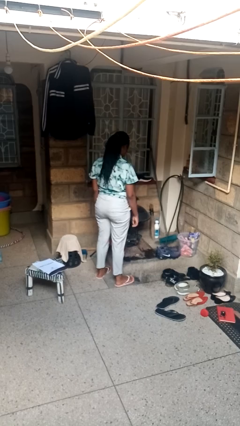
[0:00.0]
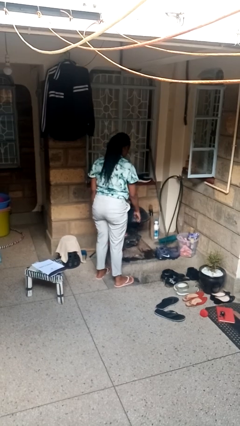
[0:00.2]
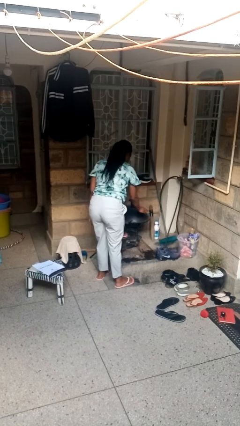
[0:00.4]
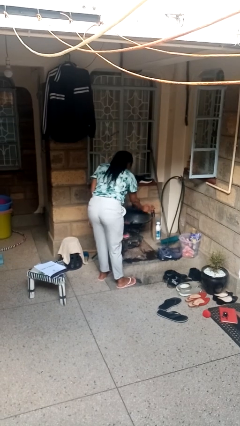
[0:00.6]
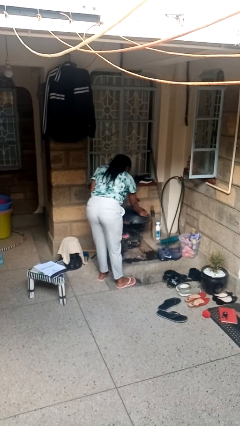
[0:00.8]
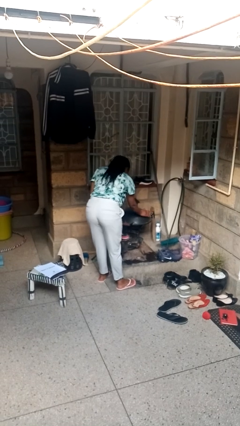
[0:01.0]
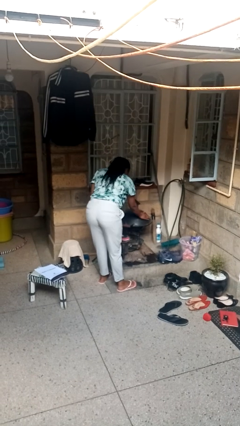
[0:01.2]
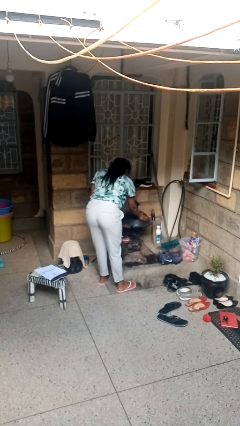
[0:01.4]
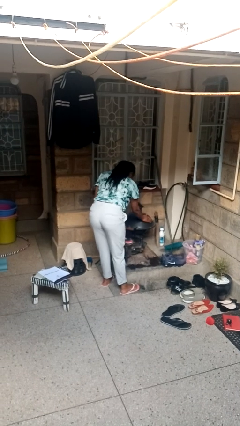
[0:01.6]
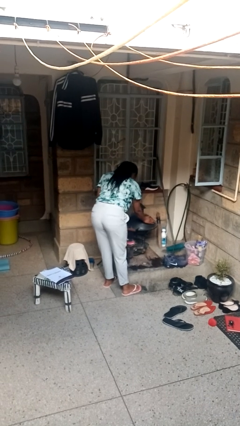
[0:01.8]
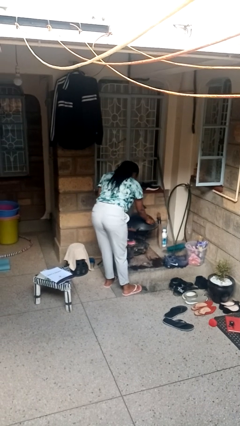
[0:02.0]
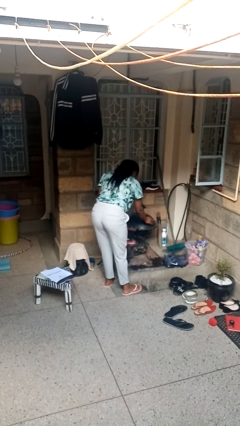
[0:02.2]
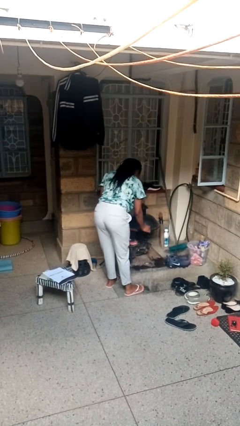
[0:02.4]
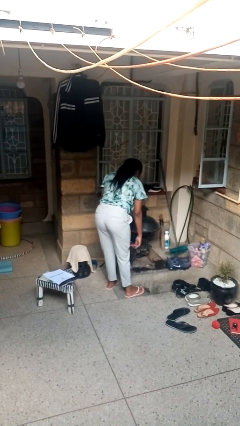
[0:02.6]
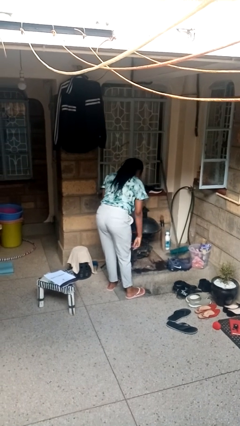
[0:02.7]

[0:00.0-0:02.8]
person taps object with finger

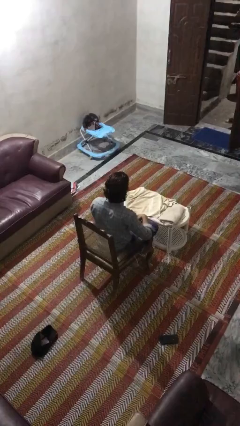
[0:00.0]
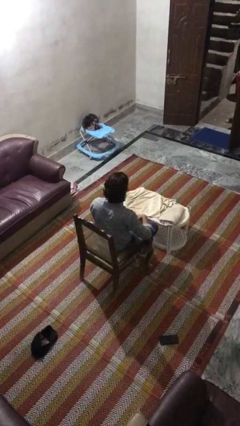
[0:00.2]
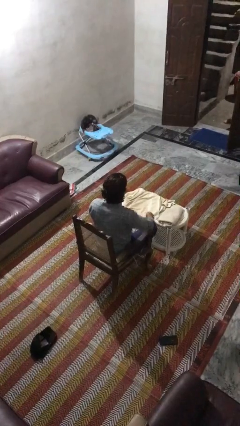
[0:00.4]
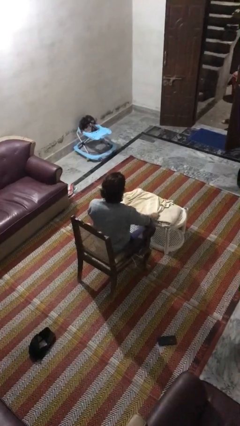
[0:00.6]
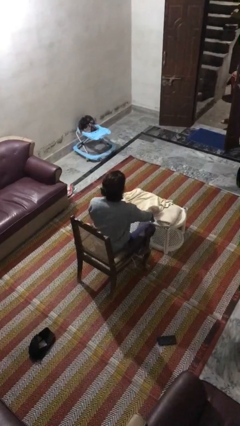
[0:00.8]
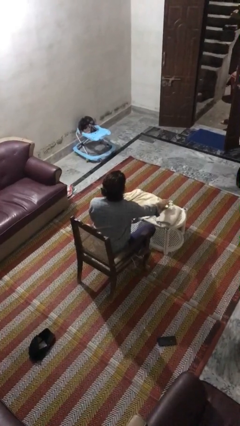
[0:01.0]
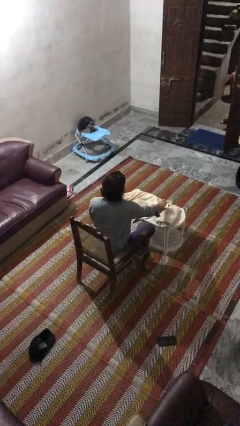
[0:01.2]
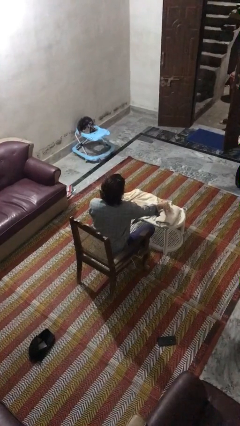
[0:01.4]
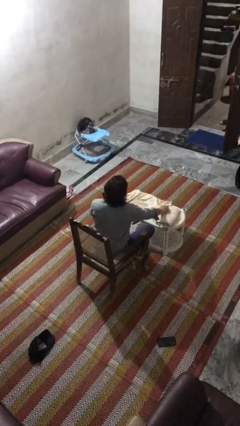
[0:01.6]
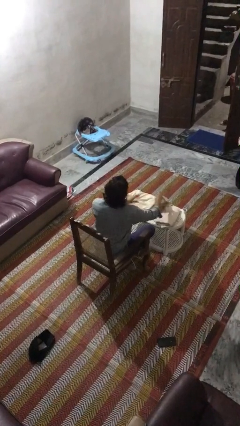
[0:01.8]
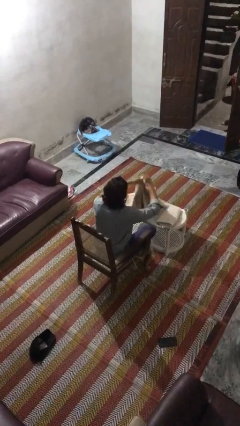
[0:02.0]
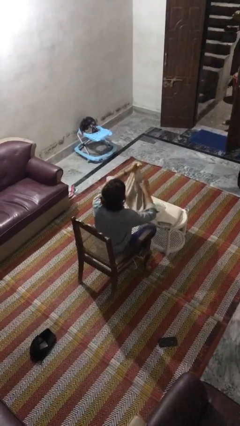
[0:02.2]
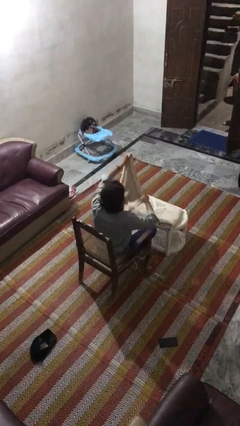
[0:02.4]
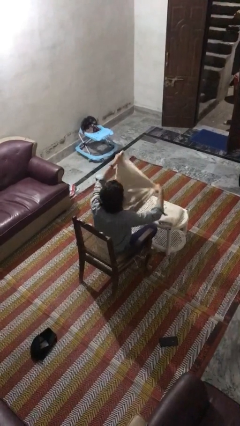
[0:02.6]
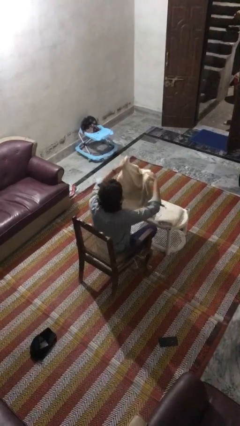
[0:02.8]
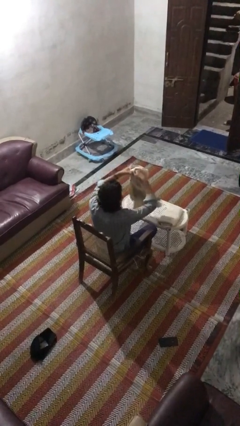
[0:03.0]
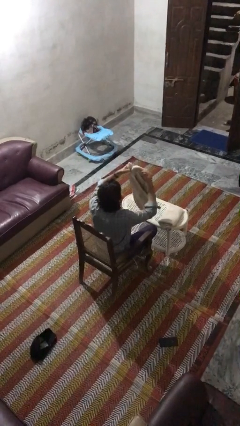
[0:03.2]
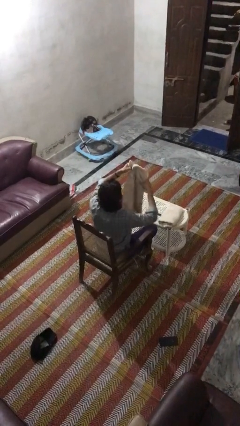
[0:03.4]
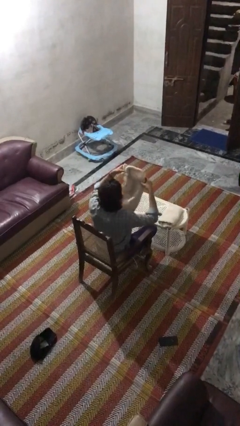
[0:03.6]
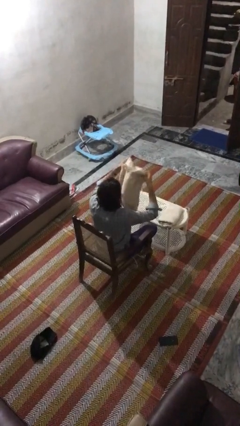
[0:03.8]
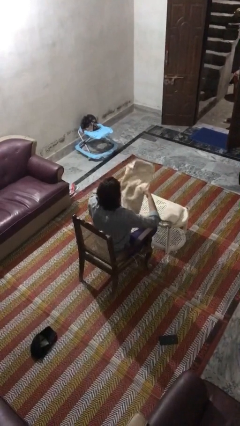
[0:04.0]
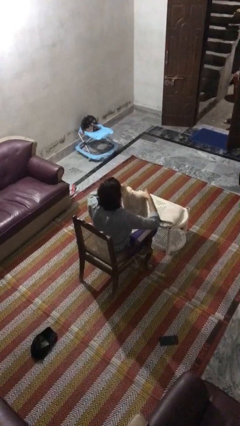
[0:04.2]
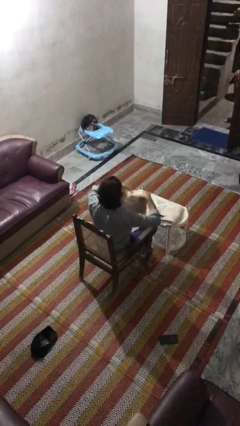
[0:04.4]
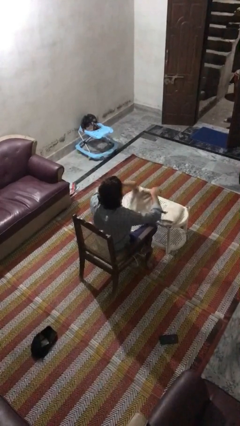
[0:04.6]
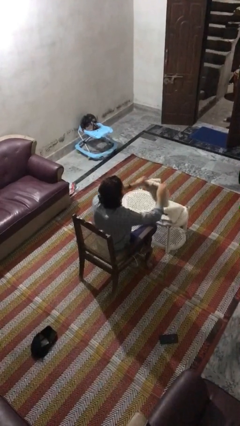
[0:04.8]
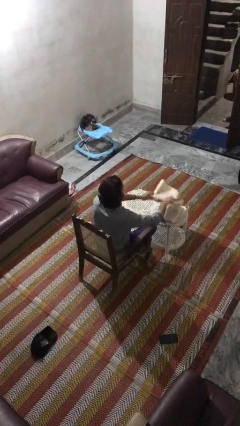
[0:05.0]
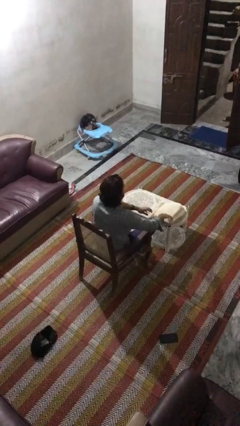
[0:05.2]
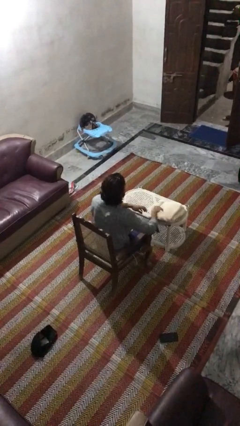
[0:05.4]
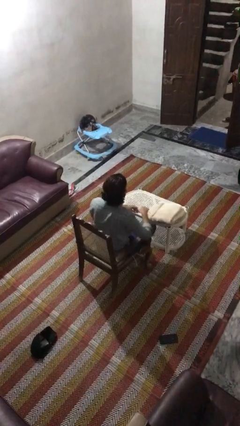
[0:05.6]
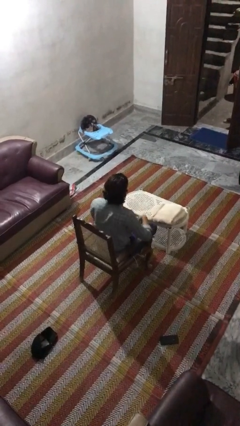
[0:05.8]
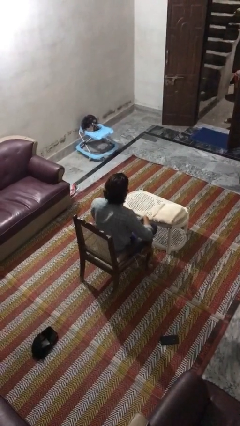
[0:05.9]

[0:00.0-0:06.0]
person folds towel

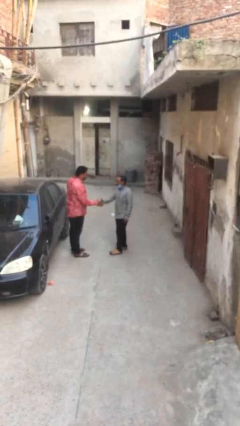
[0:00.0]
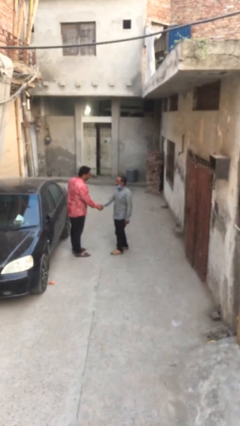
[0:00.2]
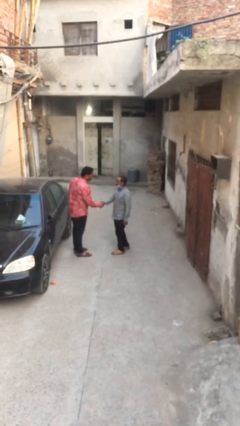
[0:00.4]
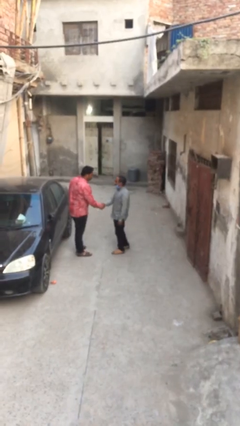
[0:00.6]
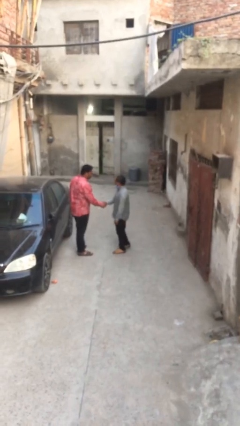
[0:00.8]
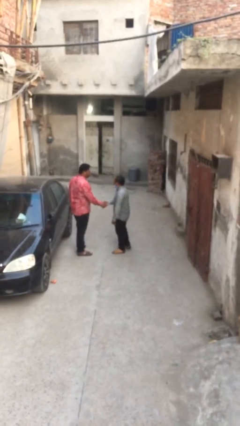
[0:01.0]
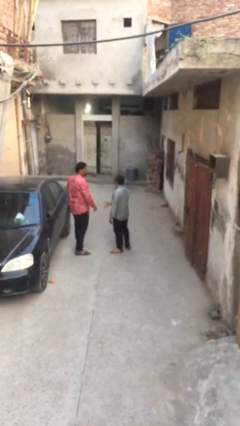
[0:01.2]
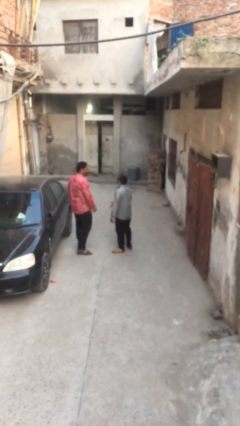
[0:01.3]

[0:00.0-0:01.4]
person shakes hand

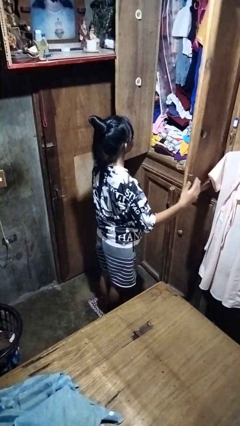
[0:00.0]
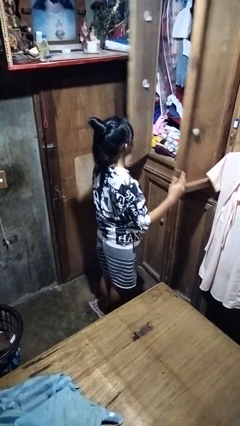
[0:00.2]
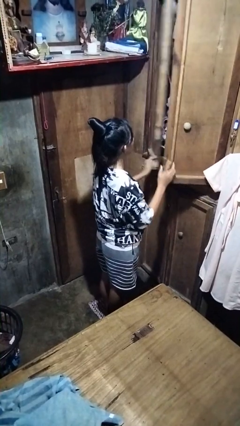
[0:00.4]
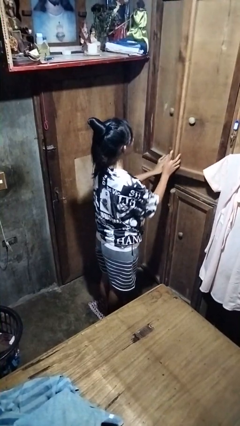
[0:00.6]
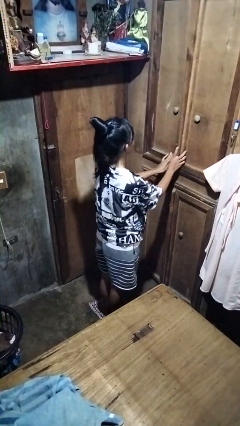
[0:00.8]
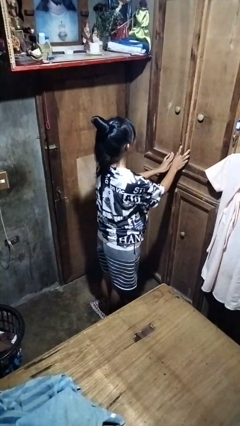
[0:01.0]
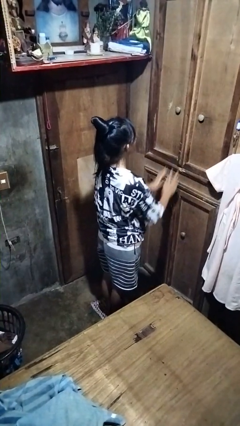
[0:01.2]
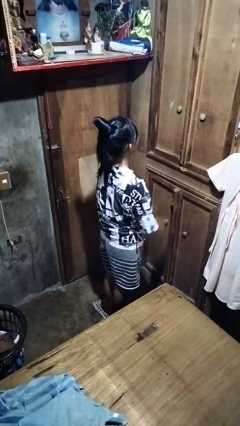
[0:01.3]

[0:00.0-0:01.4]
person closes closet door

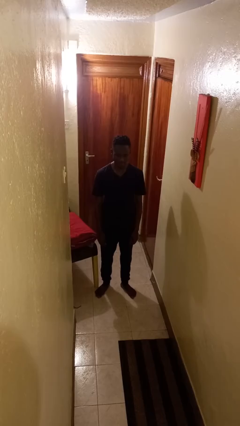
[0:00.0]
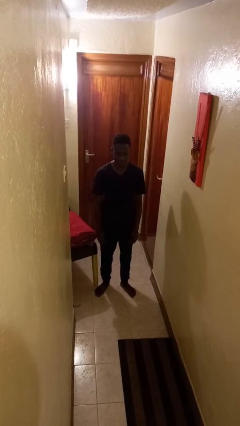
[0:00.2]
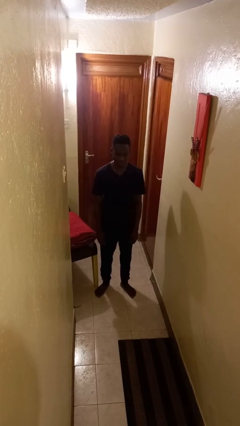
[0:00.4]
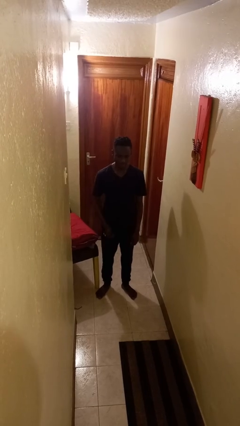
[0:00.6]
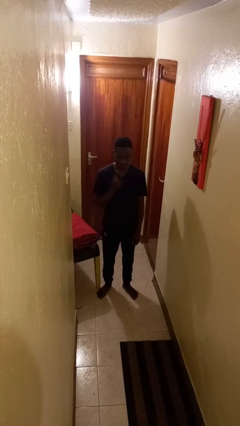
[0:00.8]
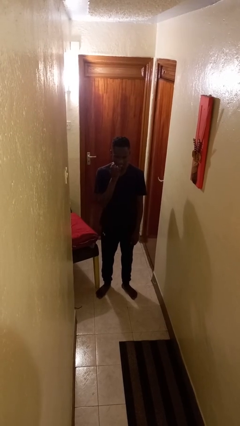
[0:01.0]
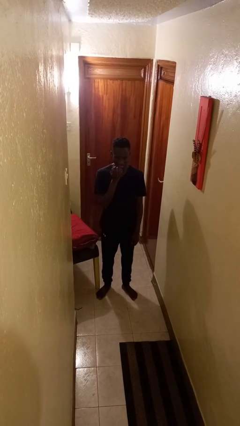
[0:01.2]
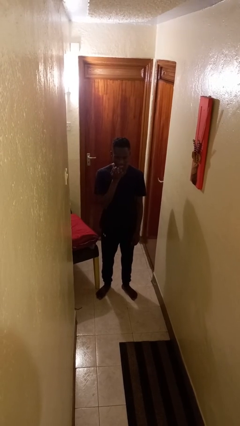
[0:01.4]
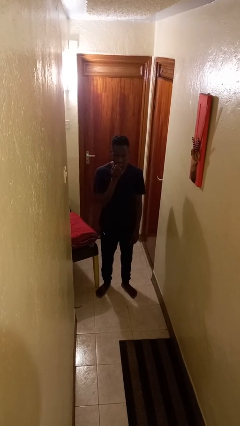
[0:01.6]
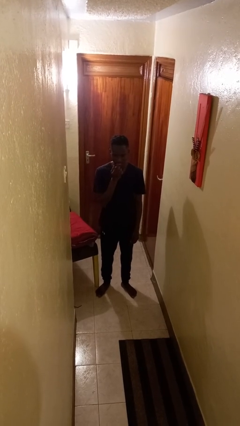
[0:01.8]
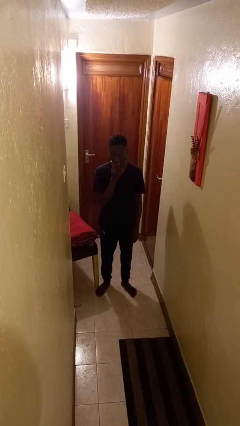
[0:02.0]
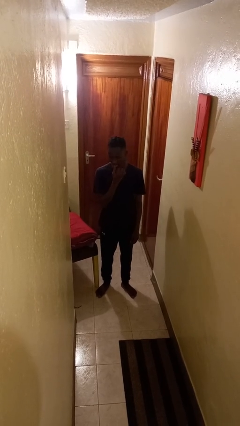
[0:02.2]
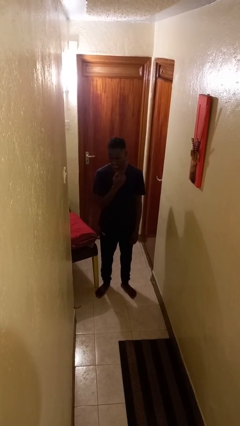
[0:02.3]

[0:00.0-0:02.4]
person licks fingers

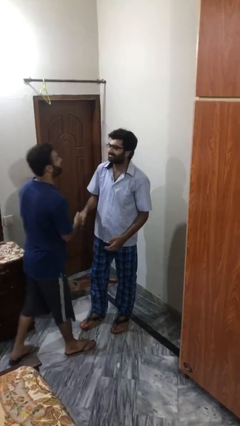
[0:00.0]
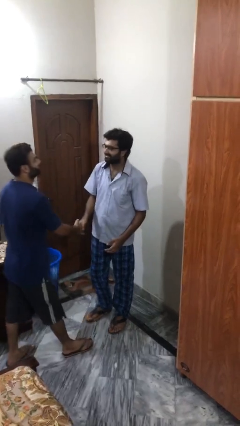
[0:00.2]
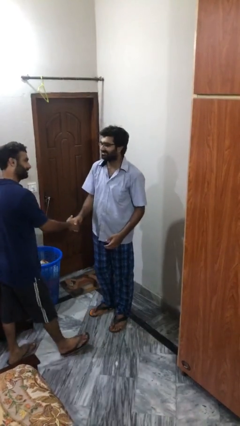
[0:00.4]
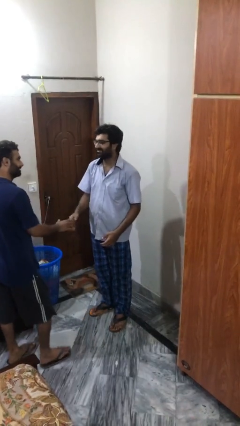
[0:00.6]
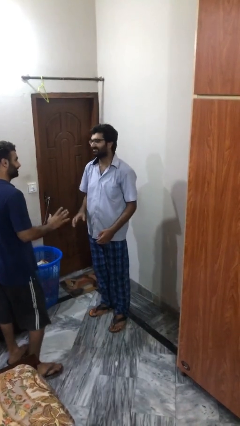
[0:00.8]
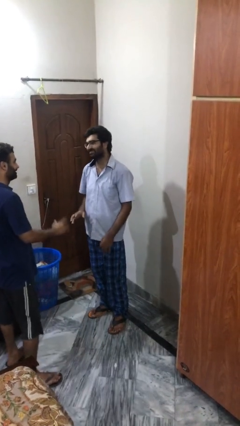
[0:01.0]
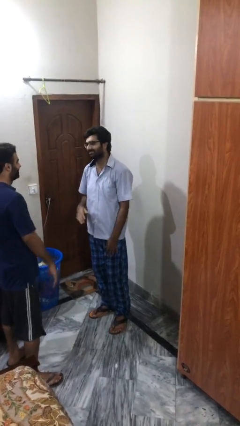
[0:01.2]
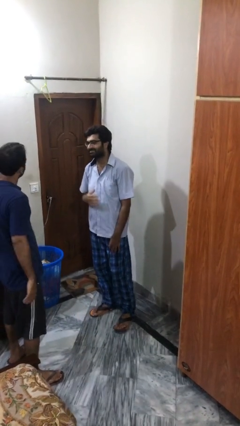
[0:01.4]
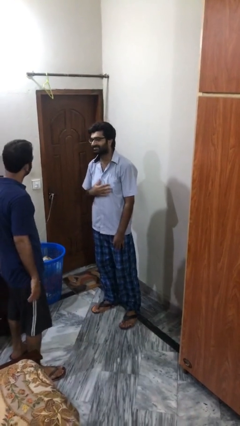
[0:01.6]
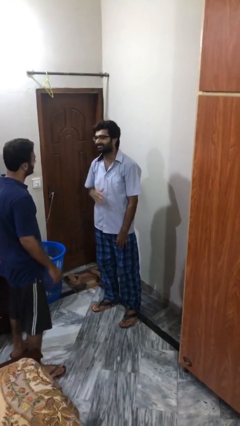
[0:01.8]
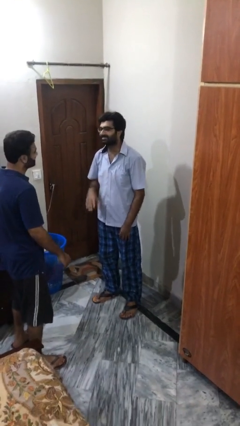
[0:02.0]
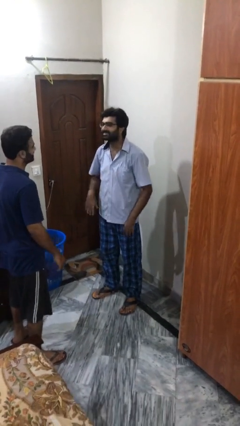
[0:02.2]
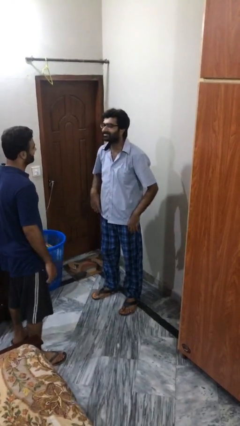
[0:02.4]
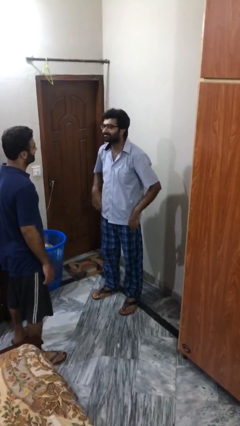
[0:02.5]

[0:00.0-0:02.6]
person talks to person

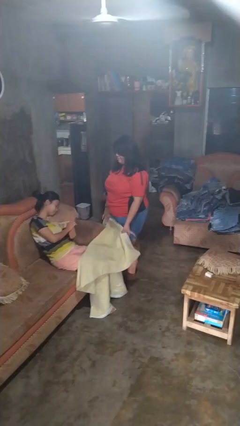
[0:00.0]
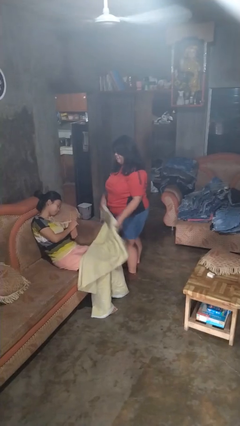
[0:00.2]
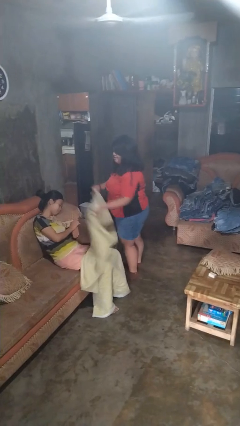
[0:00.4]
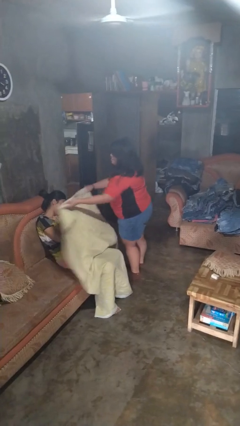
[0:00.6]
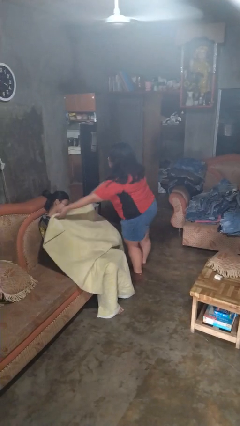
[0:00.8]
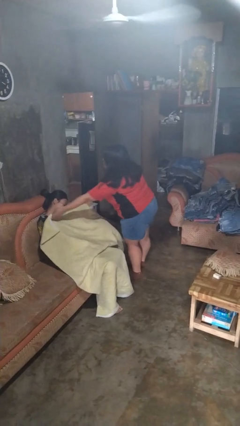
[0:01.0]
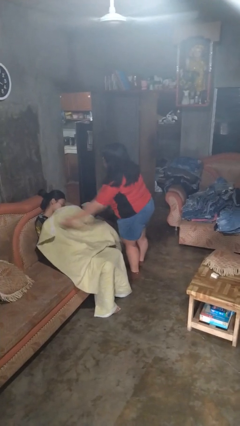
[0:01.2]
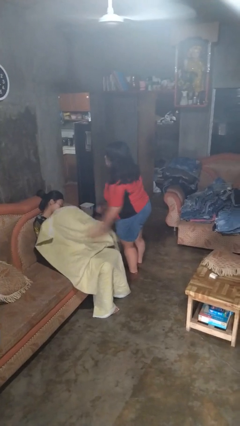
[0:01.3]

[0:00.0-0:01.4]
person covers friend with blanket
